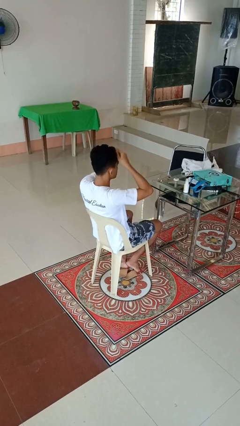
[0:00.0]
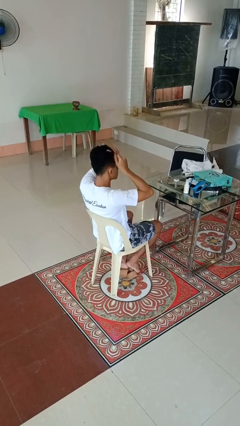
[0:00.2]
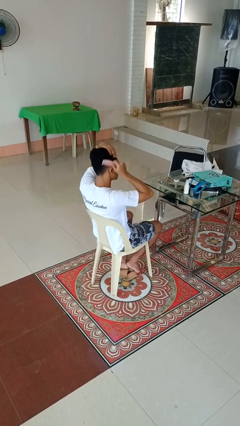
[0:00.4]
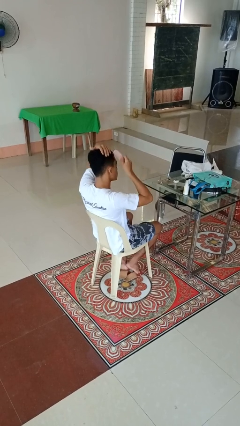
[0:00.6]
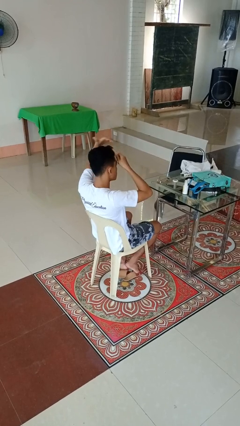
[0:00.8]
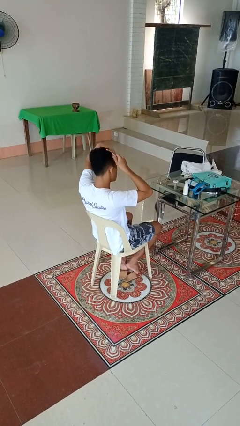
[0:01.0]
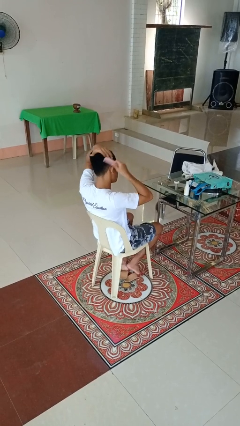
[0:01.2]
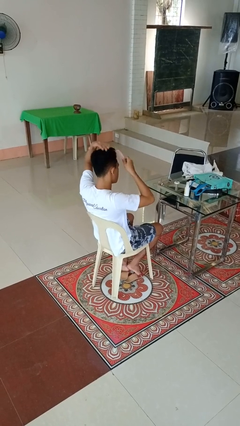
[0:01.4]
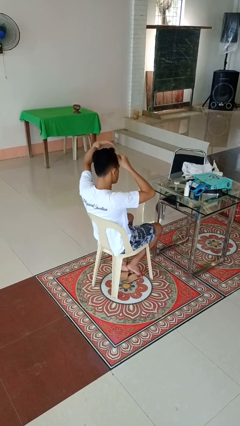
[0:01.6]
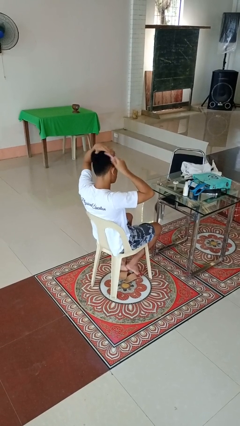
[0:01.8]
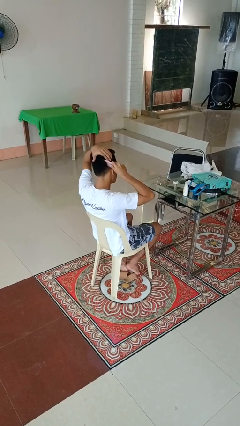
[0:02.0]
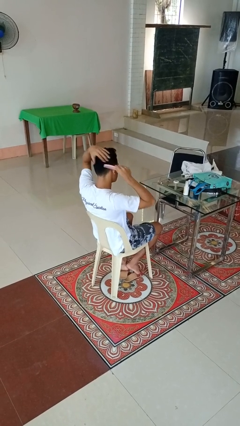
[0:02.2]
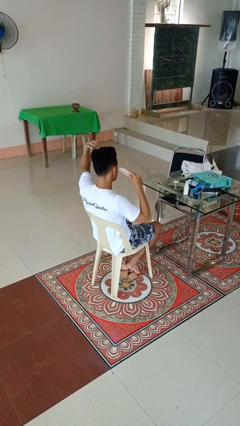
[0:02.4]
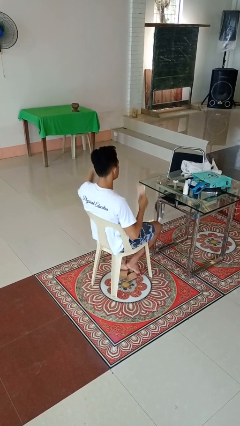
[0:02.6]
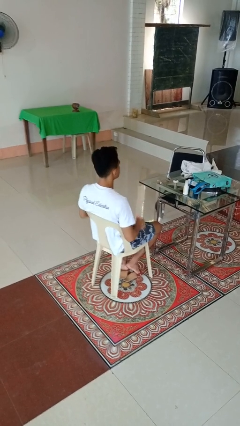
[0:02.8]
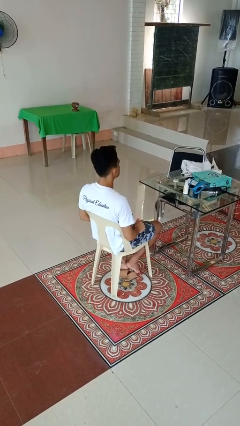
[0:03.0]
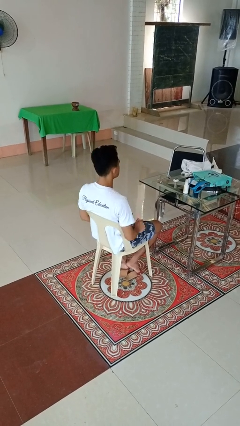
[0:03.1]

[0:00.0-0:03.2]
person brushes hair

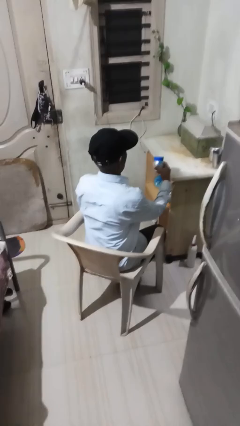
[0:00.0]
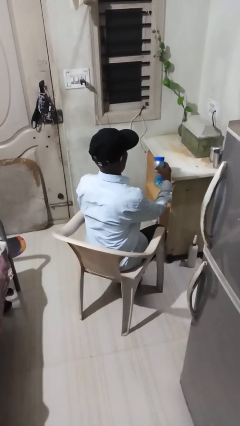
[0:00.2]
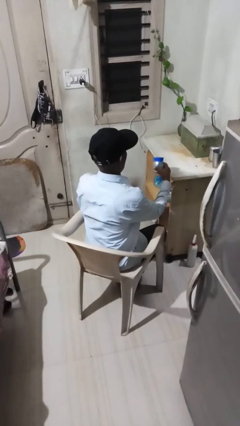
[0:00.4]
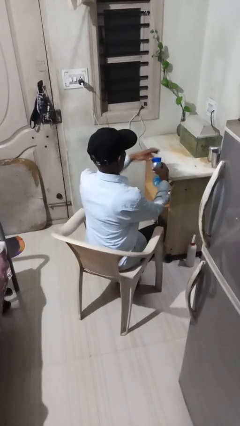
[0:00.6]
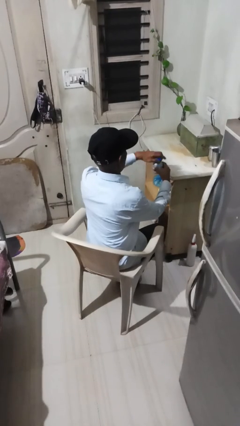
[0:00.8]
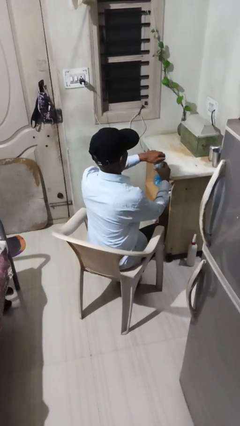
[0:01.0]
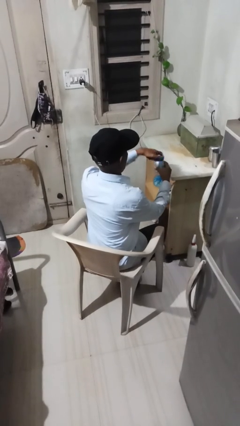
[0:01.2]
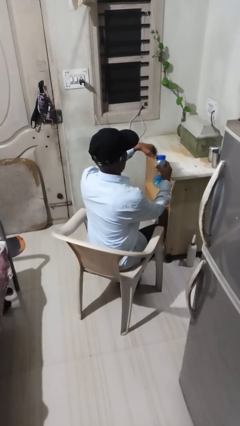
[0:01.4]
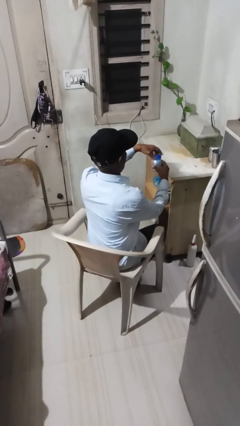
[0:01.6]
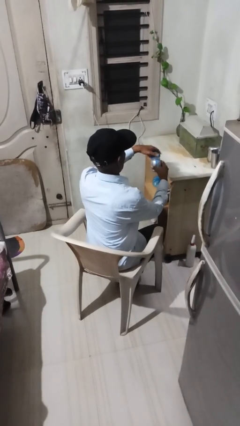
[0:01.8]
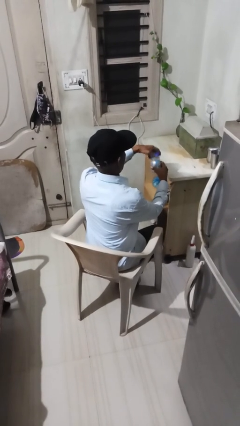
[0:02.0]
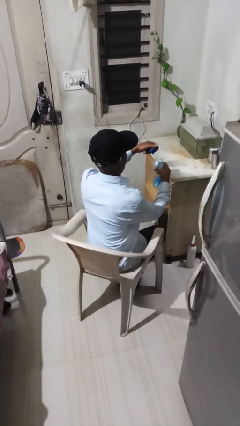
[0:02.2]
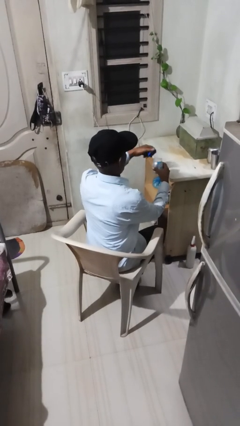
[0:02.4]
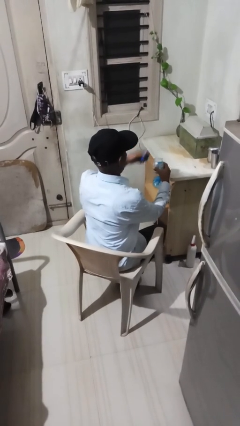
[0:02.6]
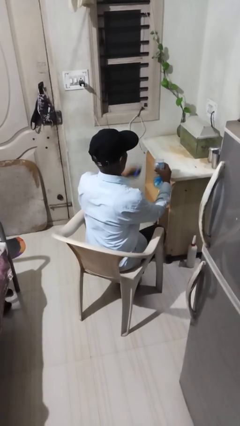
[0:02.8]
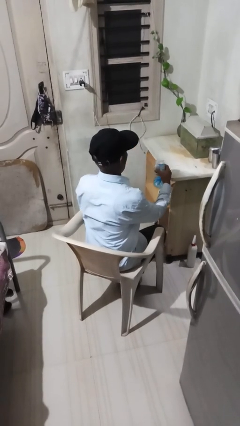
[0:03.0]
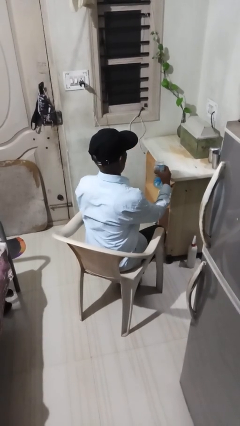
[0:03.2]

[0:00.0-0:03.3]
person opens jar

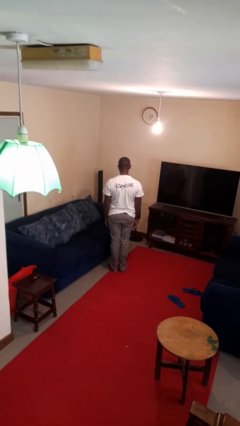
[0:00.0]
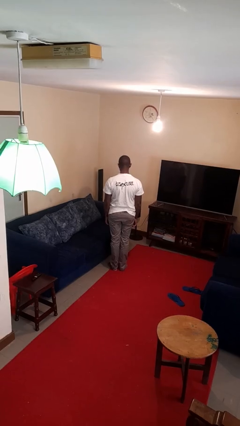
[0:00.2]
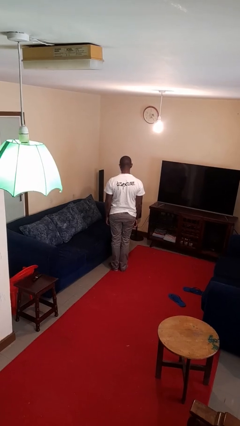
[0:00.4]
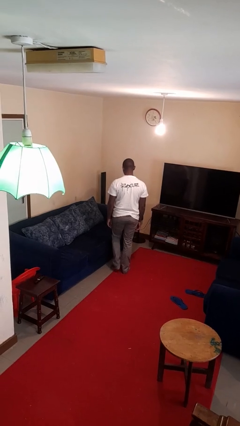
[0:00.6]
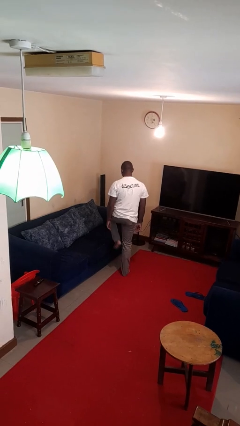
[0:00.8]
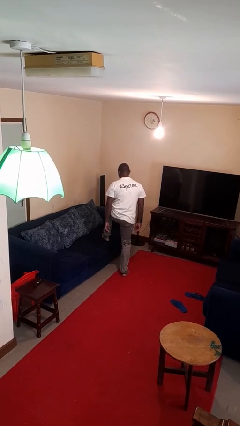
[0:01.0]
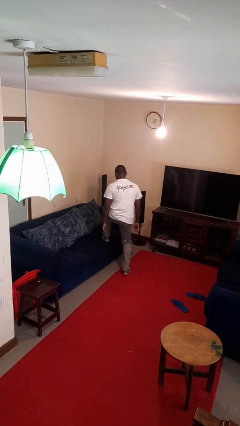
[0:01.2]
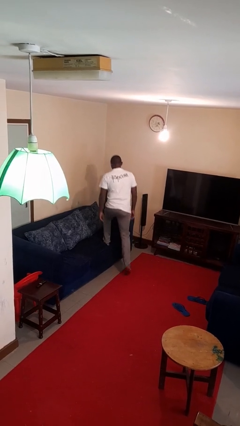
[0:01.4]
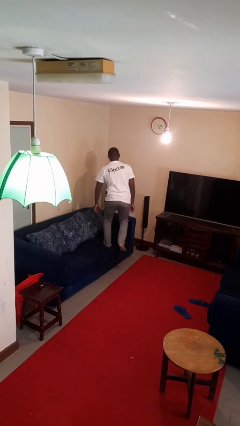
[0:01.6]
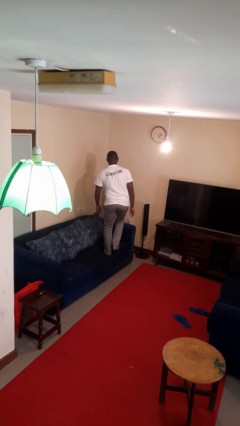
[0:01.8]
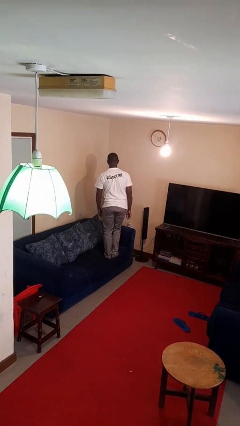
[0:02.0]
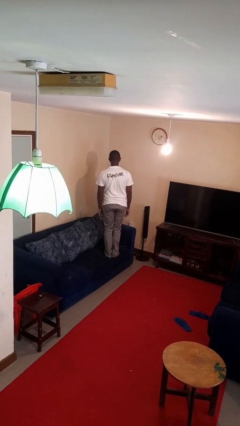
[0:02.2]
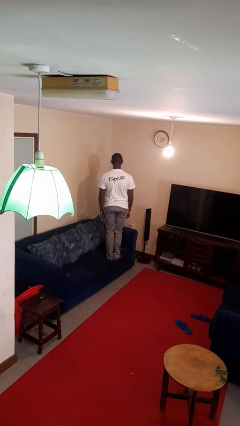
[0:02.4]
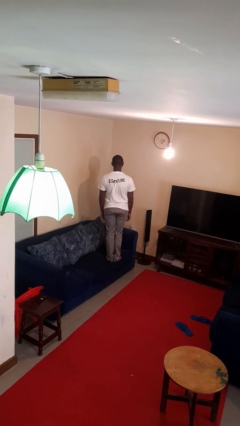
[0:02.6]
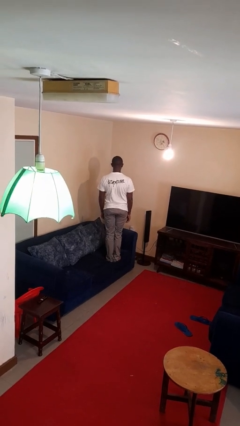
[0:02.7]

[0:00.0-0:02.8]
person climbs on couch

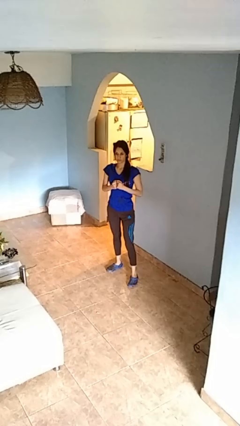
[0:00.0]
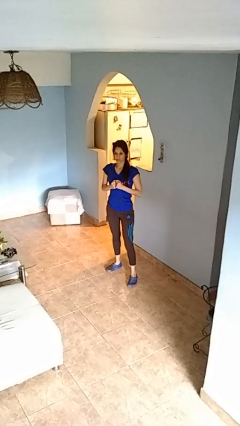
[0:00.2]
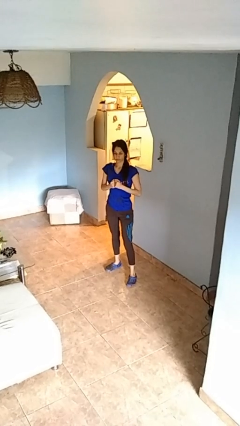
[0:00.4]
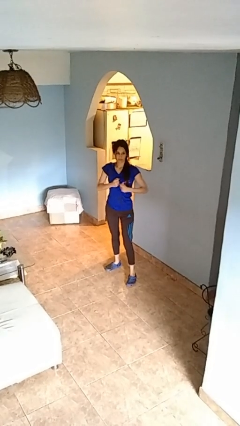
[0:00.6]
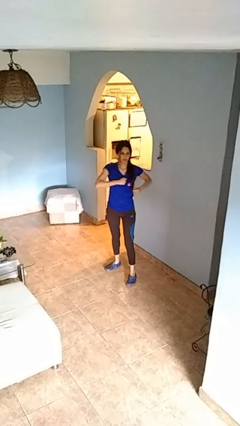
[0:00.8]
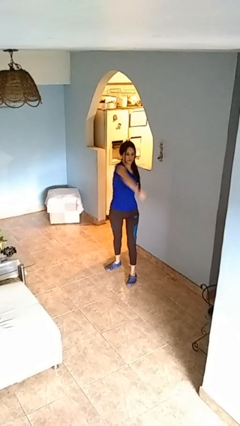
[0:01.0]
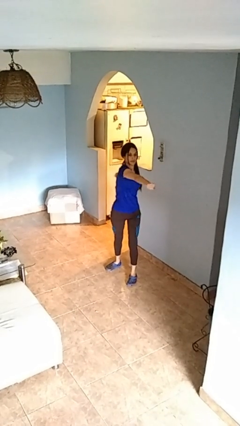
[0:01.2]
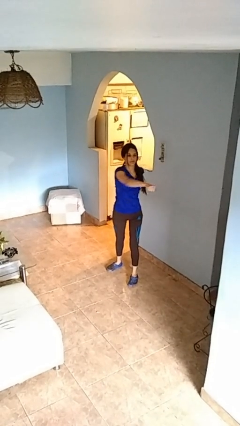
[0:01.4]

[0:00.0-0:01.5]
person punches

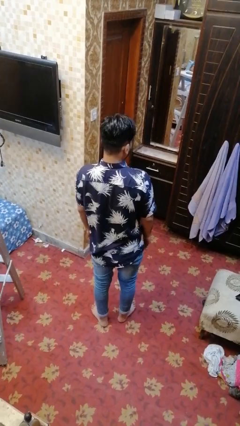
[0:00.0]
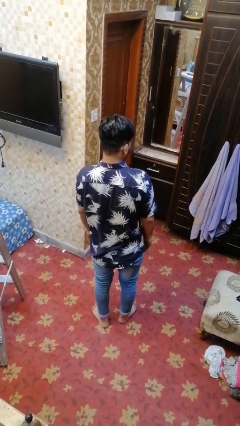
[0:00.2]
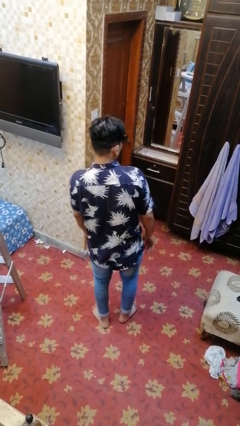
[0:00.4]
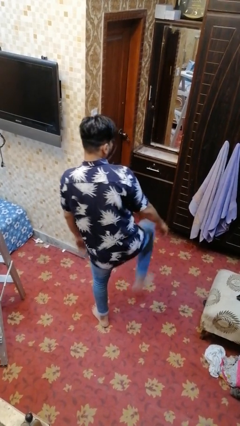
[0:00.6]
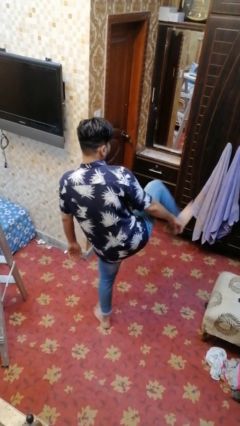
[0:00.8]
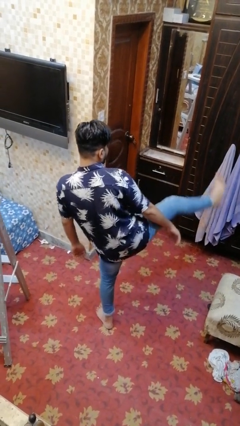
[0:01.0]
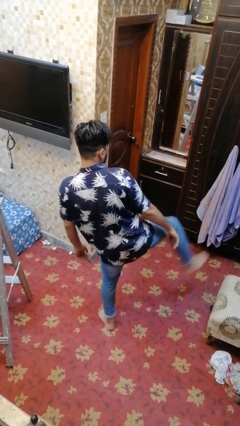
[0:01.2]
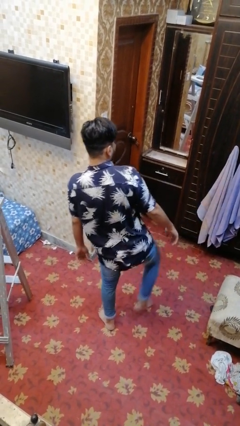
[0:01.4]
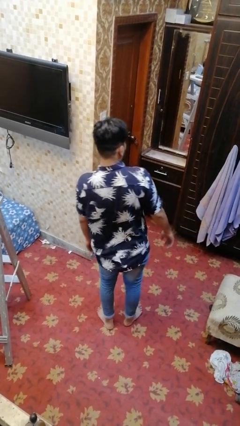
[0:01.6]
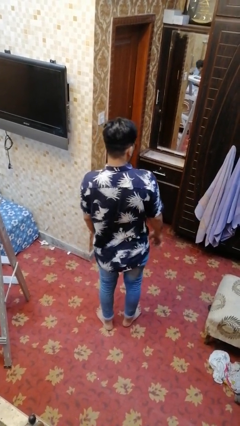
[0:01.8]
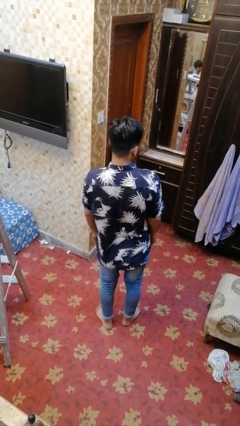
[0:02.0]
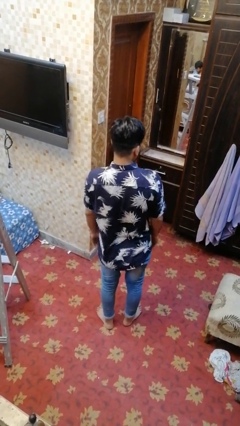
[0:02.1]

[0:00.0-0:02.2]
person karate kicks

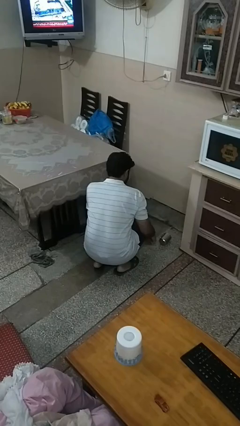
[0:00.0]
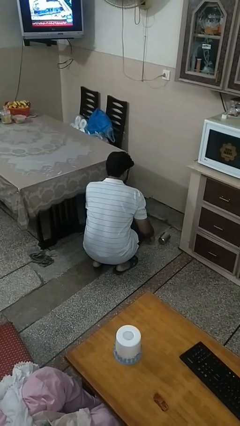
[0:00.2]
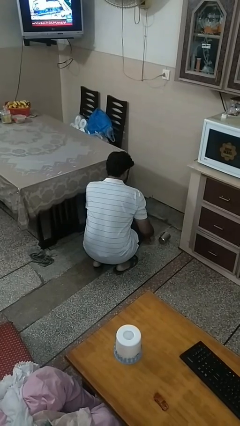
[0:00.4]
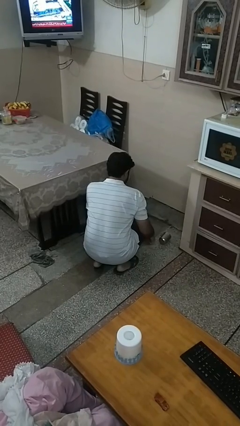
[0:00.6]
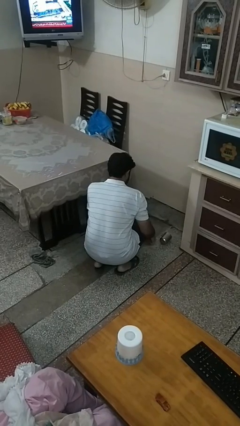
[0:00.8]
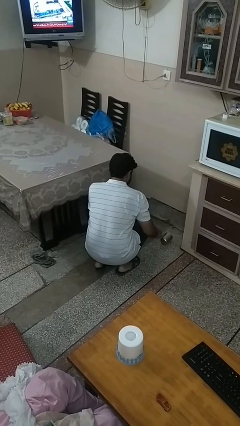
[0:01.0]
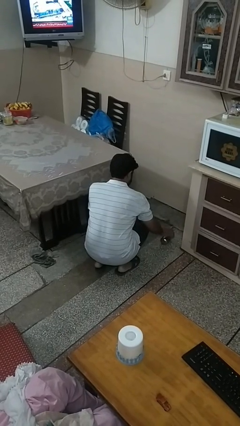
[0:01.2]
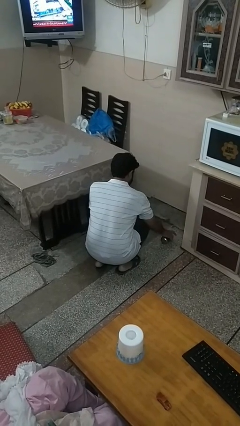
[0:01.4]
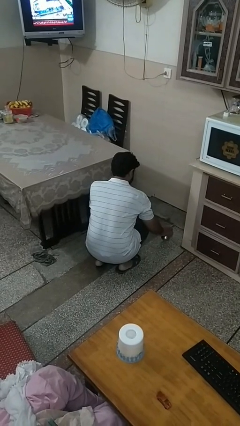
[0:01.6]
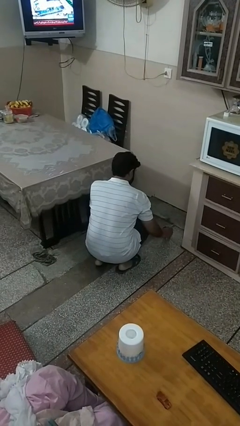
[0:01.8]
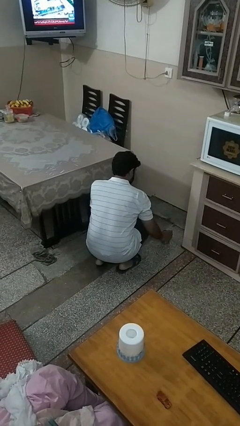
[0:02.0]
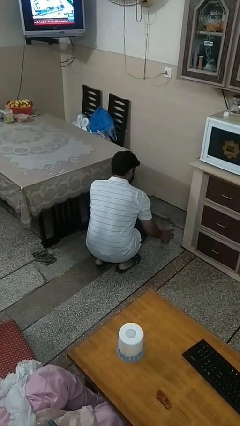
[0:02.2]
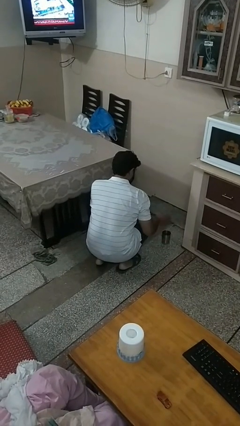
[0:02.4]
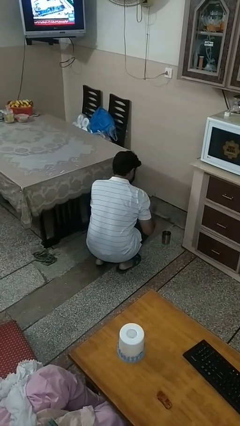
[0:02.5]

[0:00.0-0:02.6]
person sets upright glass

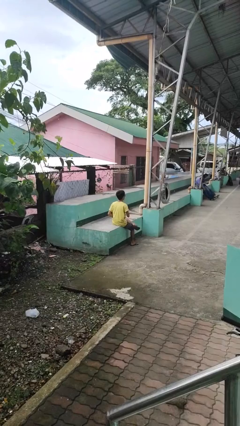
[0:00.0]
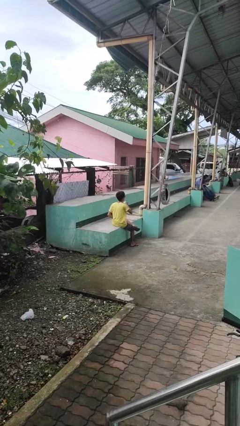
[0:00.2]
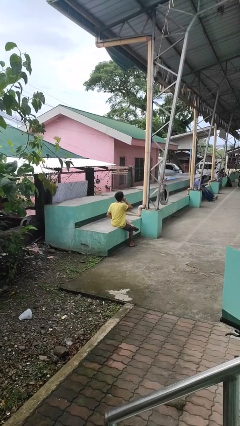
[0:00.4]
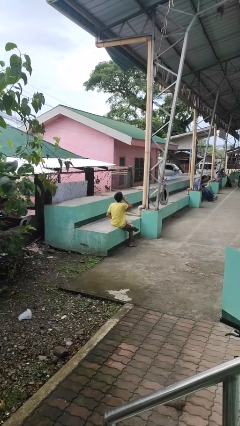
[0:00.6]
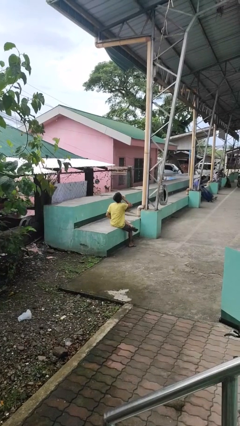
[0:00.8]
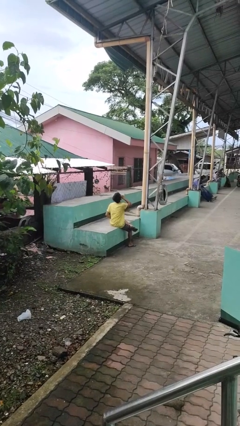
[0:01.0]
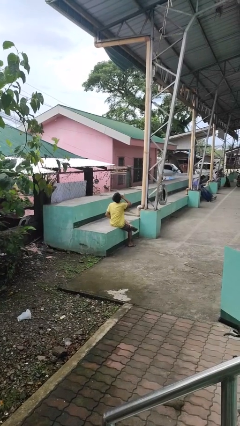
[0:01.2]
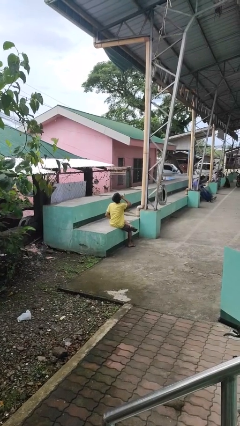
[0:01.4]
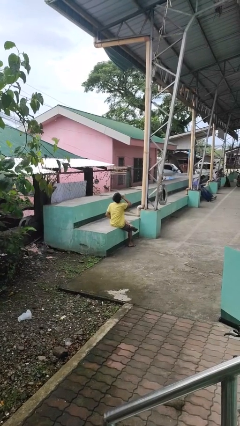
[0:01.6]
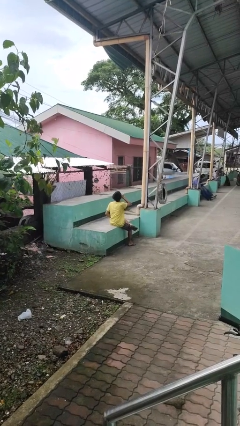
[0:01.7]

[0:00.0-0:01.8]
person drinks from bottle

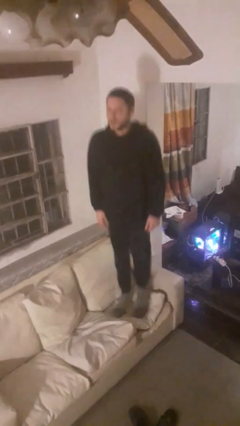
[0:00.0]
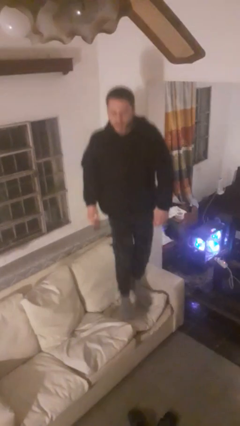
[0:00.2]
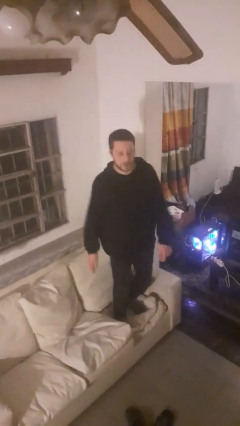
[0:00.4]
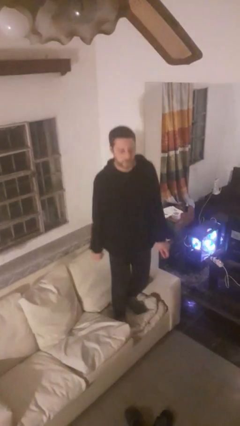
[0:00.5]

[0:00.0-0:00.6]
person jumps on couch
